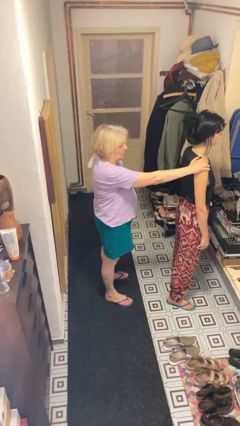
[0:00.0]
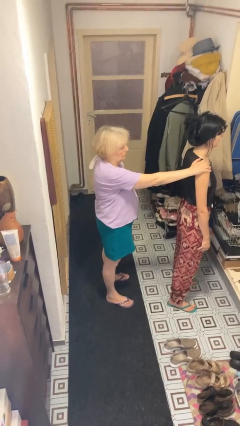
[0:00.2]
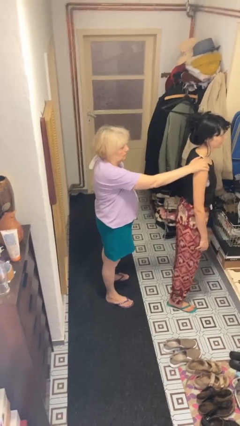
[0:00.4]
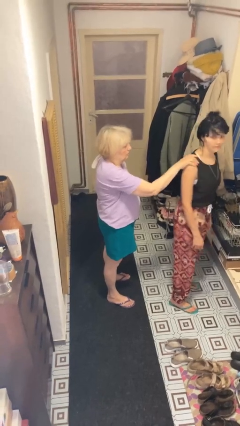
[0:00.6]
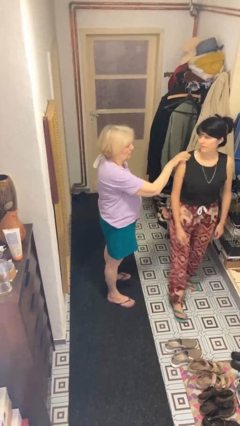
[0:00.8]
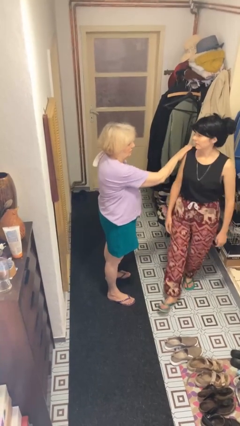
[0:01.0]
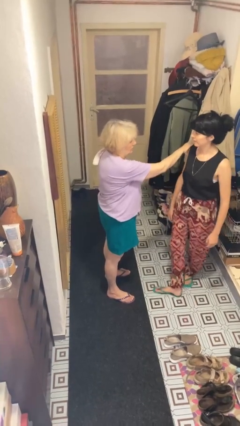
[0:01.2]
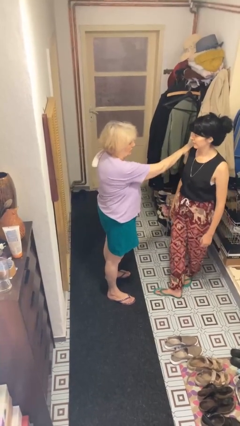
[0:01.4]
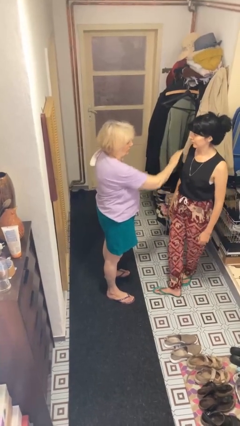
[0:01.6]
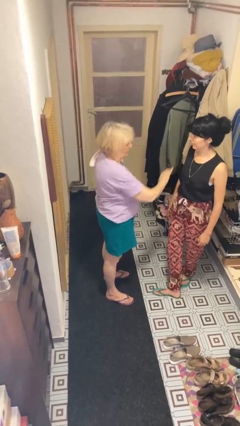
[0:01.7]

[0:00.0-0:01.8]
person spins person around

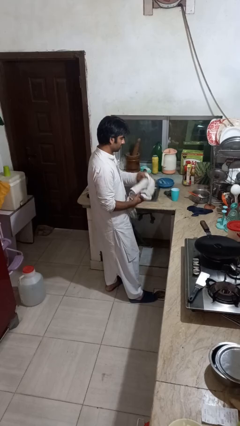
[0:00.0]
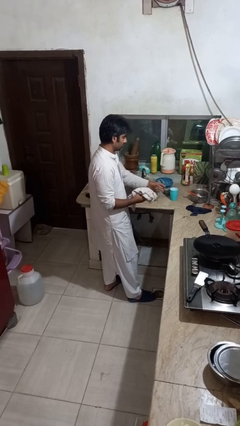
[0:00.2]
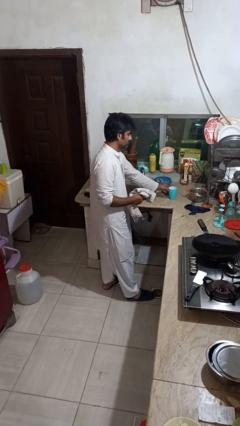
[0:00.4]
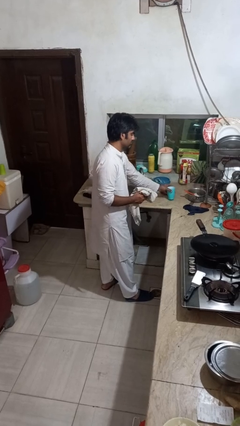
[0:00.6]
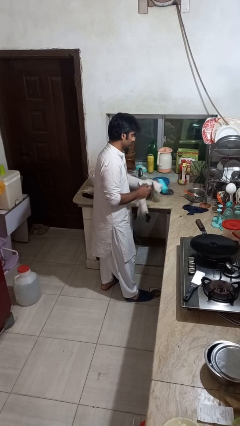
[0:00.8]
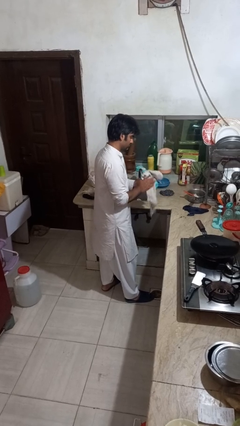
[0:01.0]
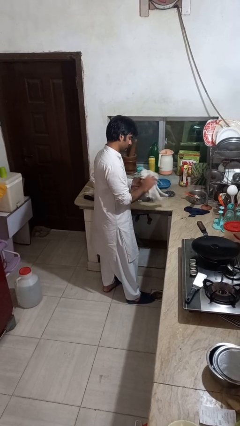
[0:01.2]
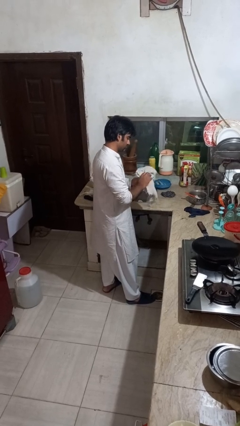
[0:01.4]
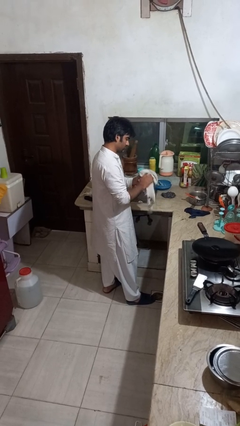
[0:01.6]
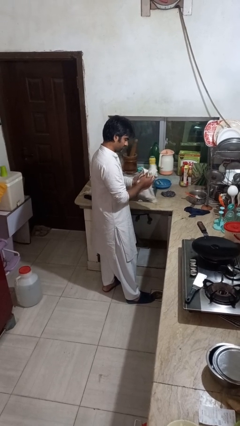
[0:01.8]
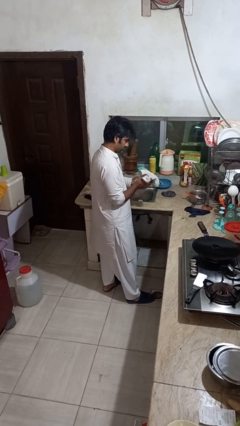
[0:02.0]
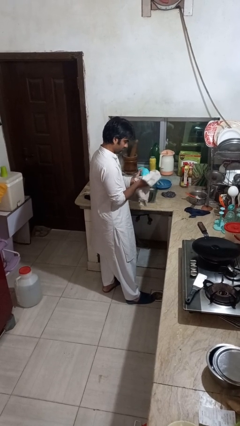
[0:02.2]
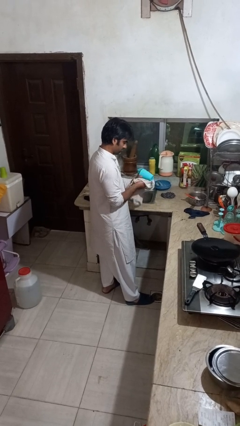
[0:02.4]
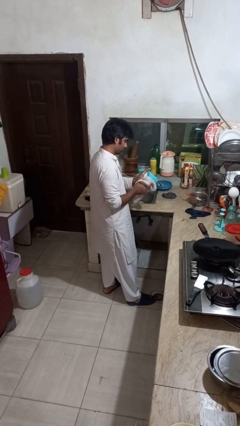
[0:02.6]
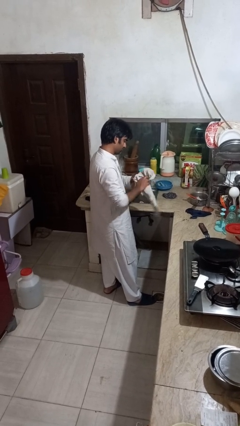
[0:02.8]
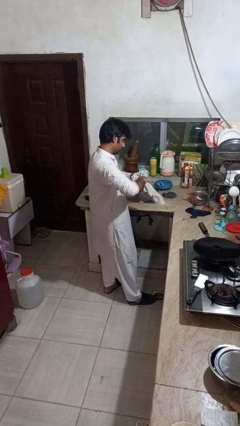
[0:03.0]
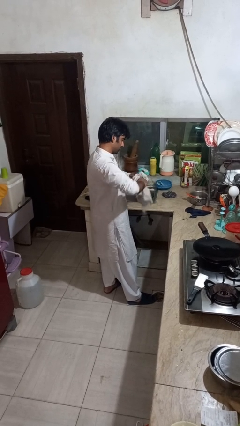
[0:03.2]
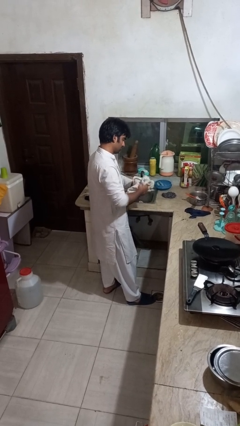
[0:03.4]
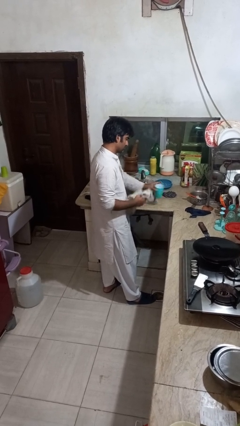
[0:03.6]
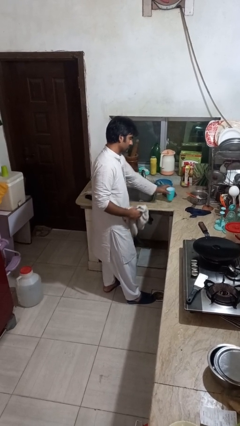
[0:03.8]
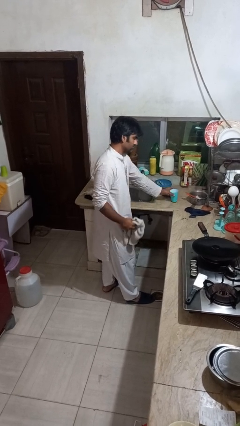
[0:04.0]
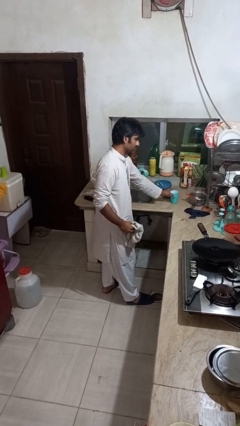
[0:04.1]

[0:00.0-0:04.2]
person dries dish

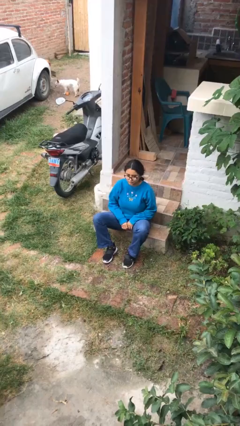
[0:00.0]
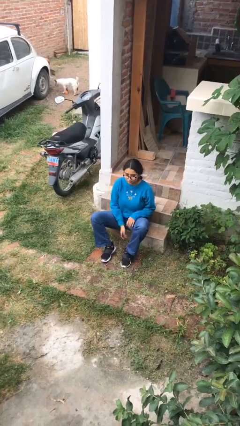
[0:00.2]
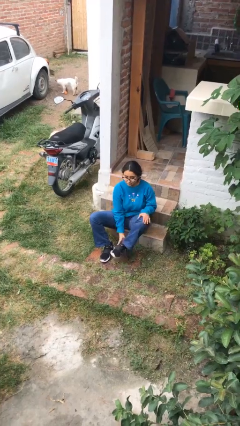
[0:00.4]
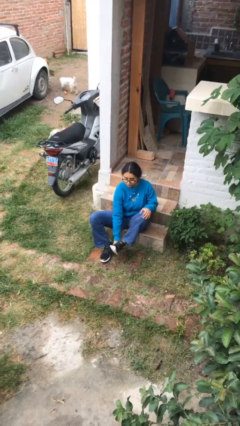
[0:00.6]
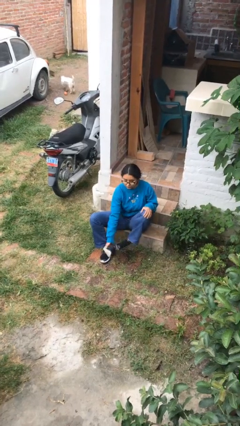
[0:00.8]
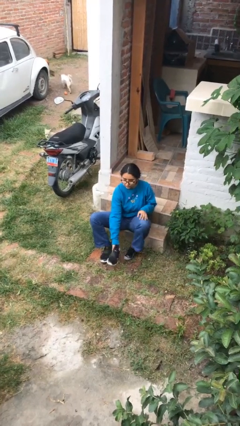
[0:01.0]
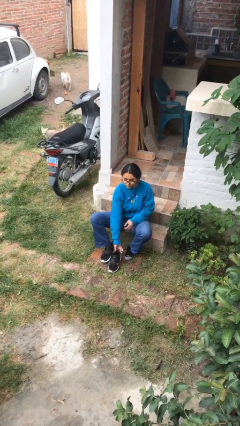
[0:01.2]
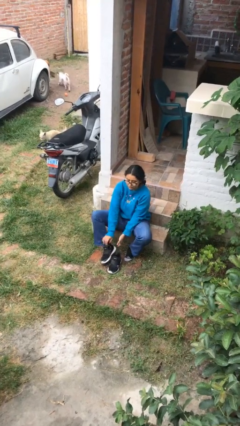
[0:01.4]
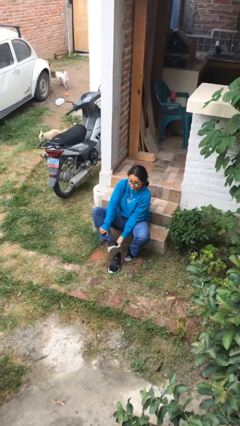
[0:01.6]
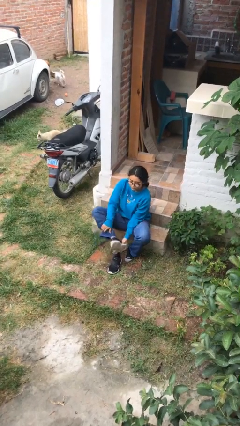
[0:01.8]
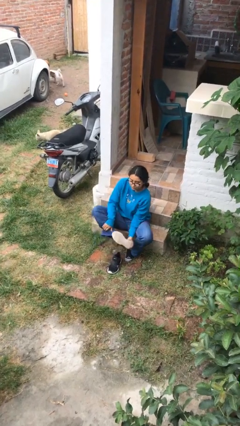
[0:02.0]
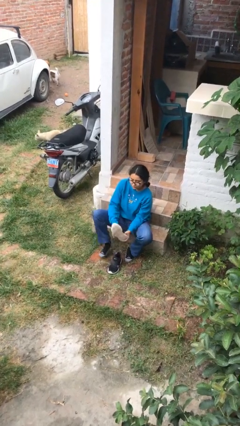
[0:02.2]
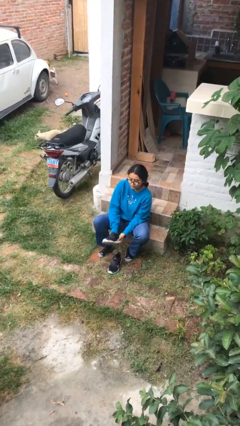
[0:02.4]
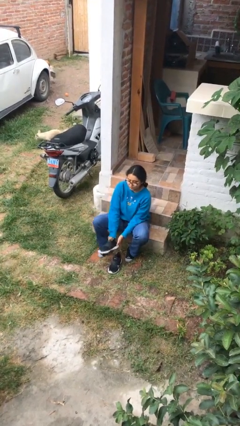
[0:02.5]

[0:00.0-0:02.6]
person takes off shoes

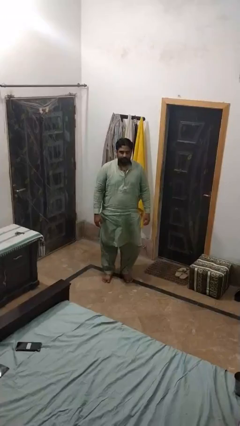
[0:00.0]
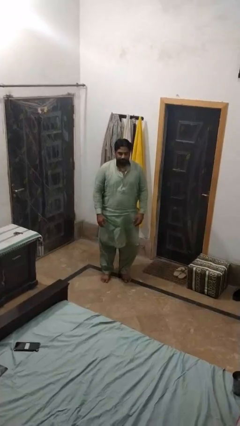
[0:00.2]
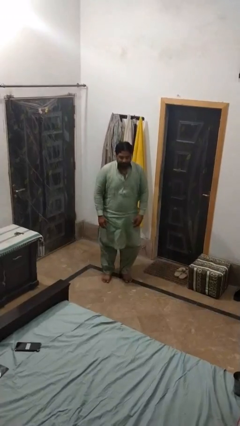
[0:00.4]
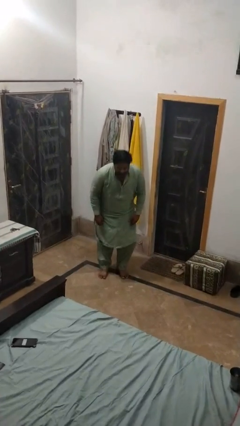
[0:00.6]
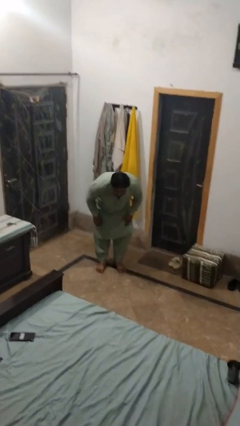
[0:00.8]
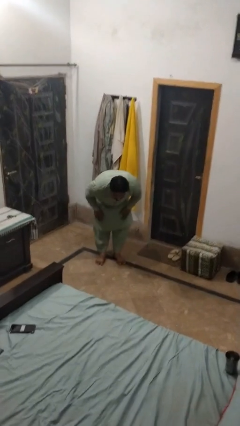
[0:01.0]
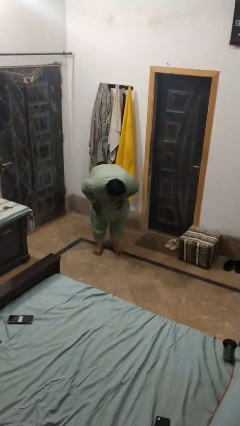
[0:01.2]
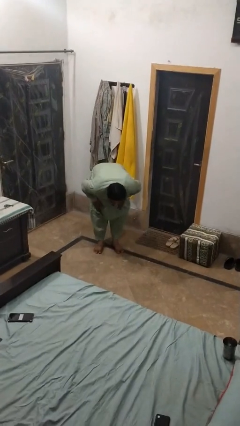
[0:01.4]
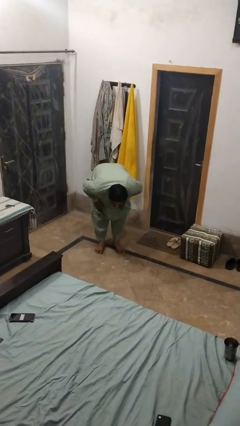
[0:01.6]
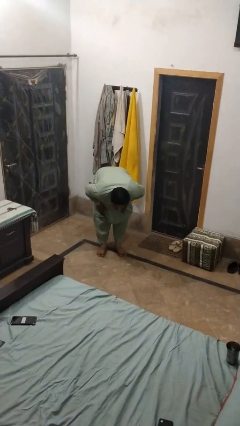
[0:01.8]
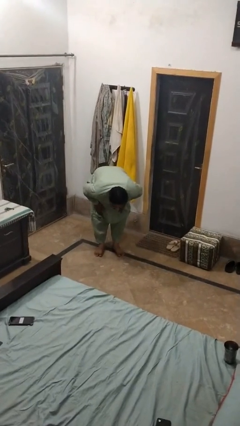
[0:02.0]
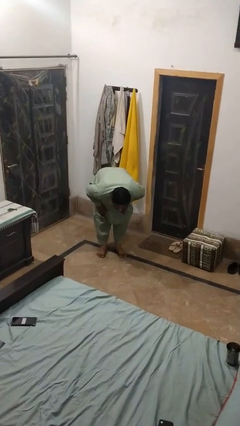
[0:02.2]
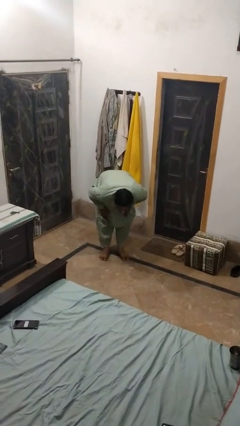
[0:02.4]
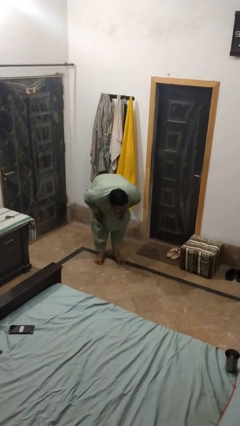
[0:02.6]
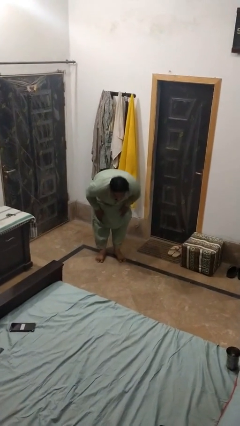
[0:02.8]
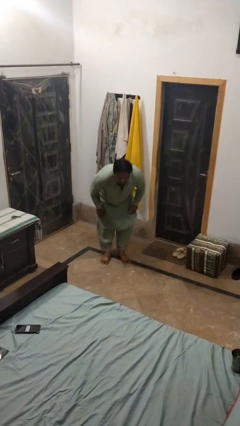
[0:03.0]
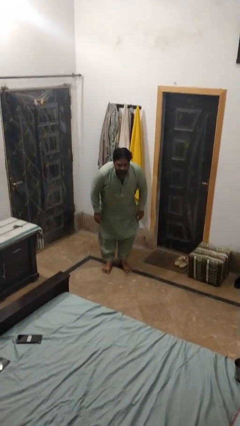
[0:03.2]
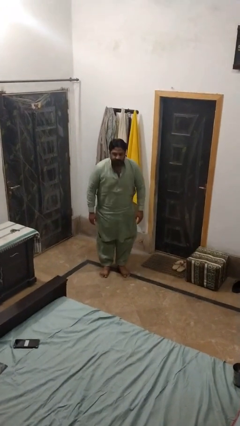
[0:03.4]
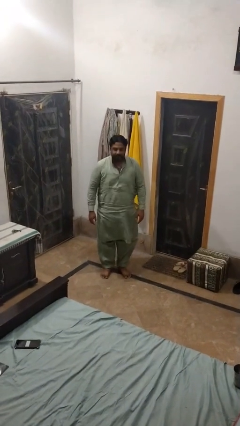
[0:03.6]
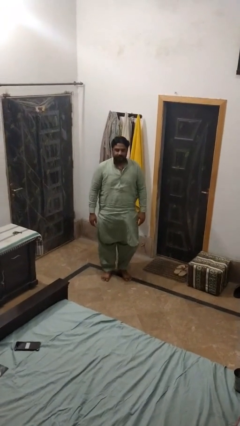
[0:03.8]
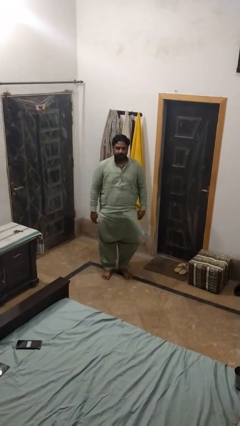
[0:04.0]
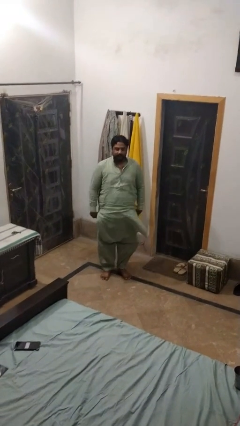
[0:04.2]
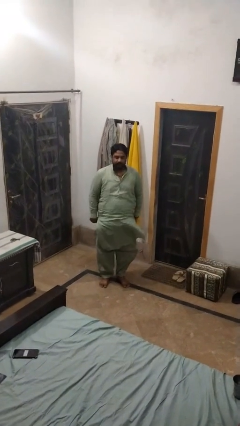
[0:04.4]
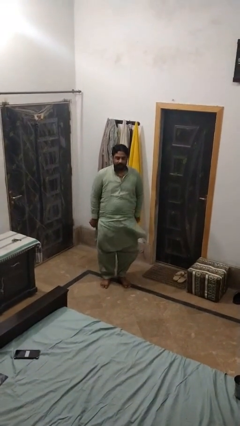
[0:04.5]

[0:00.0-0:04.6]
person bows

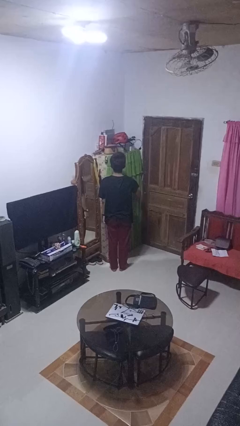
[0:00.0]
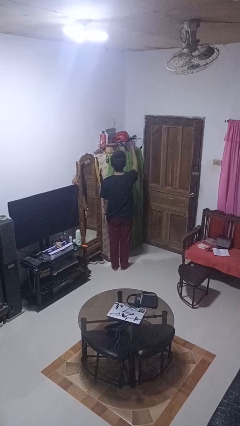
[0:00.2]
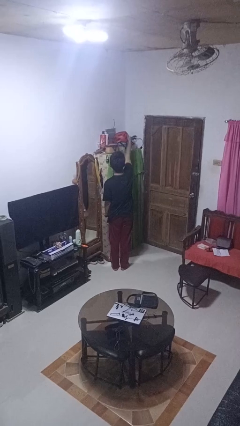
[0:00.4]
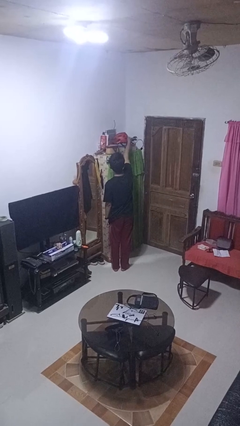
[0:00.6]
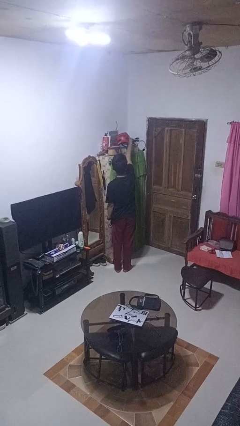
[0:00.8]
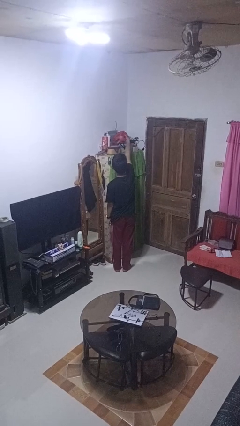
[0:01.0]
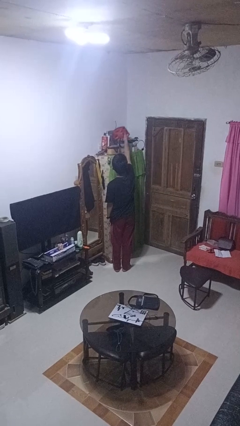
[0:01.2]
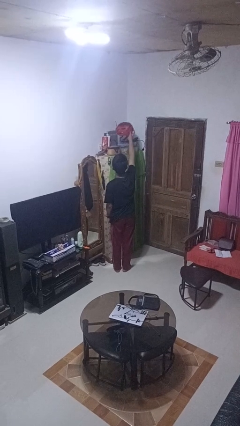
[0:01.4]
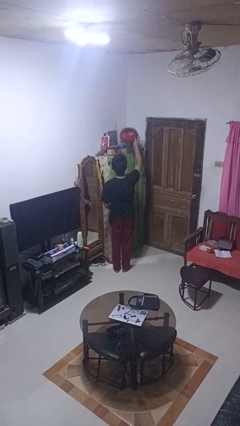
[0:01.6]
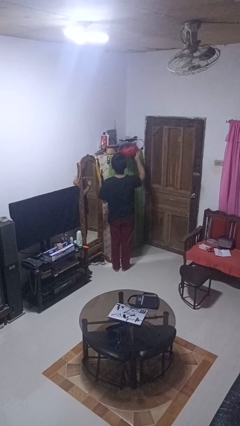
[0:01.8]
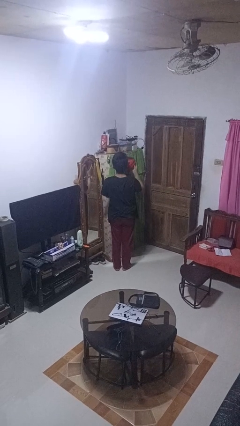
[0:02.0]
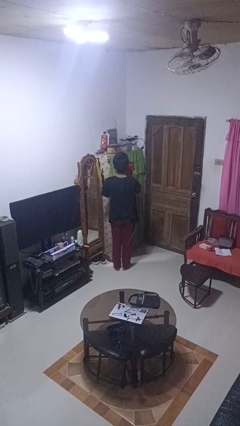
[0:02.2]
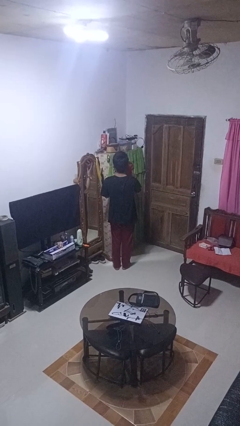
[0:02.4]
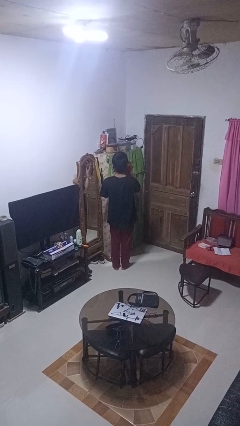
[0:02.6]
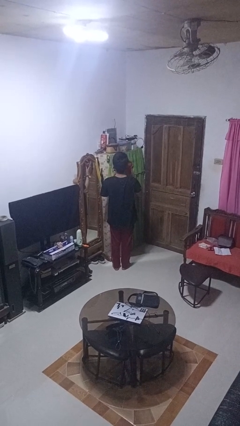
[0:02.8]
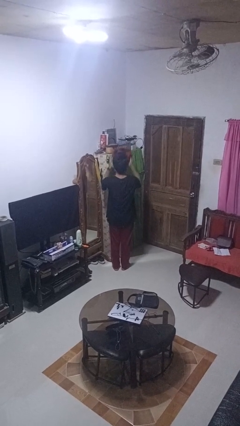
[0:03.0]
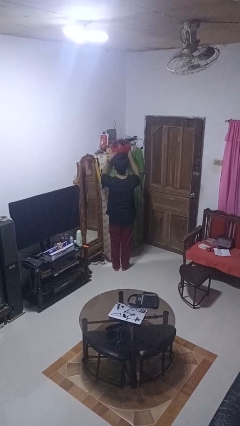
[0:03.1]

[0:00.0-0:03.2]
person picks up object from shelf

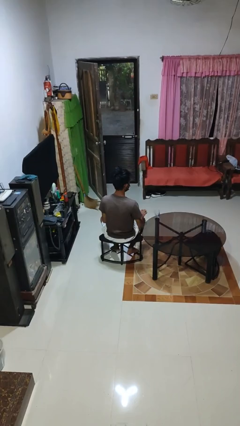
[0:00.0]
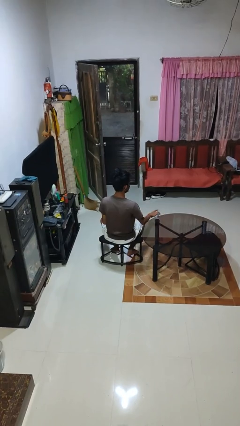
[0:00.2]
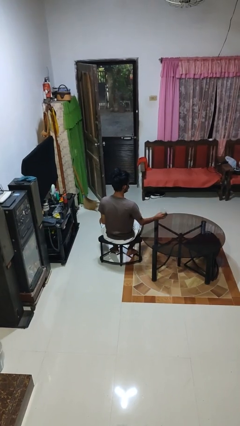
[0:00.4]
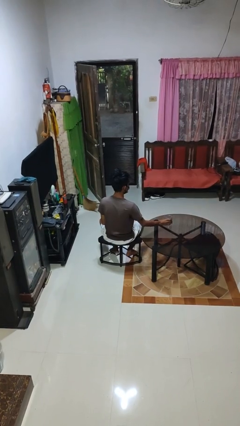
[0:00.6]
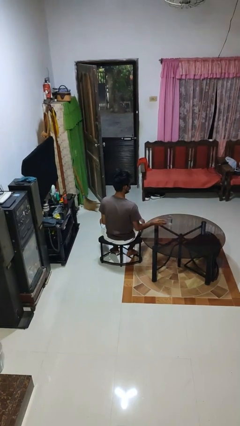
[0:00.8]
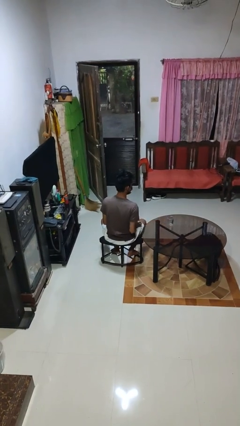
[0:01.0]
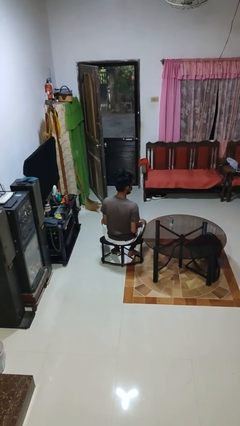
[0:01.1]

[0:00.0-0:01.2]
person sets upright glass
